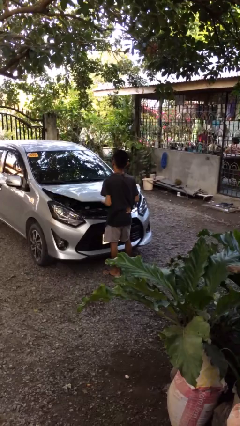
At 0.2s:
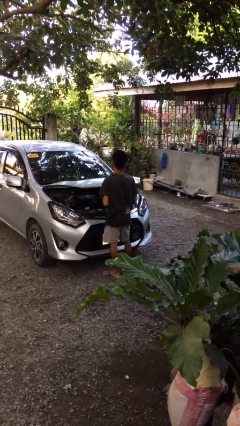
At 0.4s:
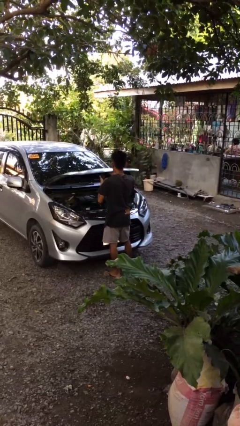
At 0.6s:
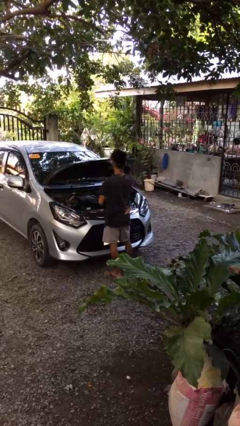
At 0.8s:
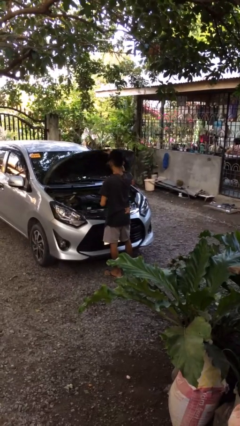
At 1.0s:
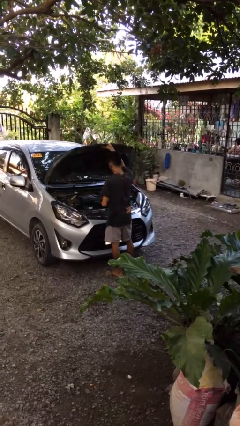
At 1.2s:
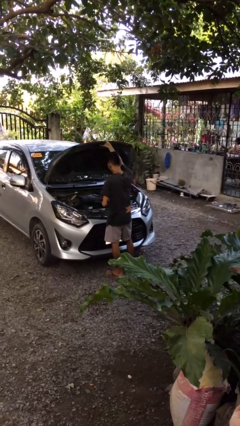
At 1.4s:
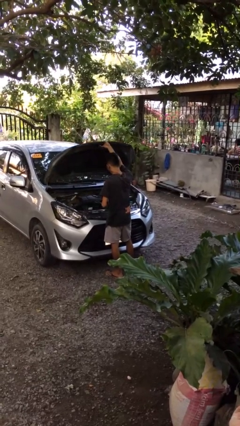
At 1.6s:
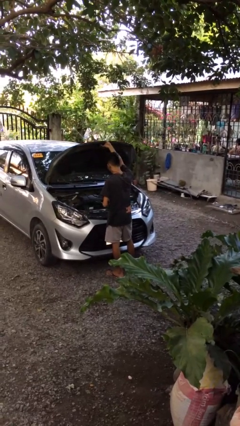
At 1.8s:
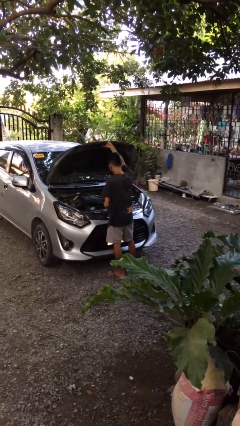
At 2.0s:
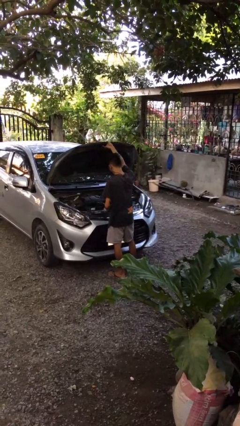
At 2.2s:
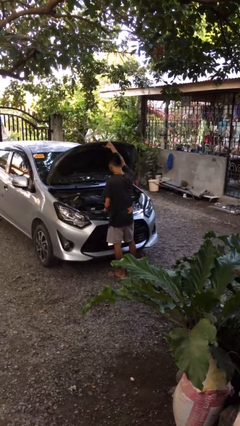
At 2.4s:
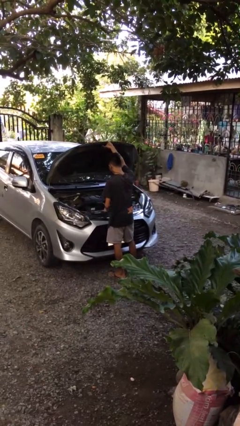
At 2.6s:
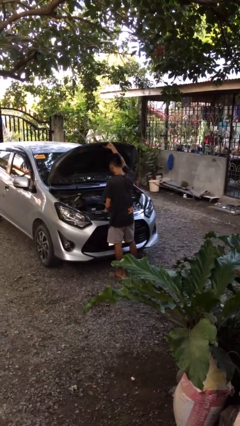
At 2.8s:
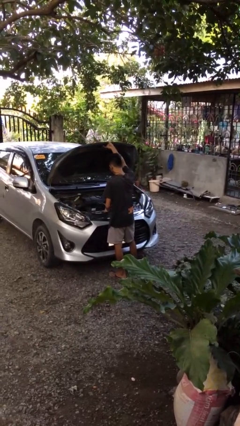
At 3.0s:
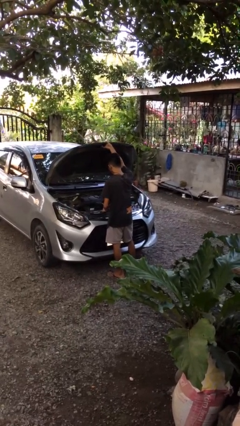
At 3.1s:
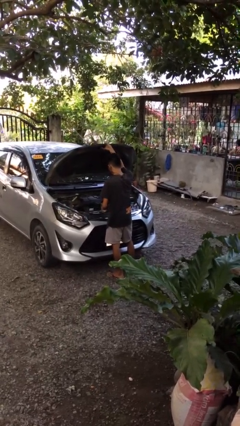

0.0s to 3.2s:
person opens car hood

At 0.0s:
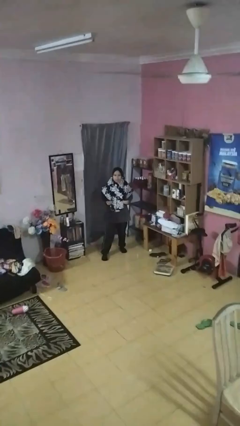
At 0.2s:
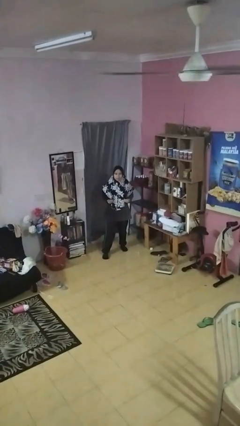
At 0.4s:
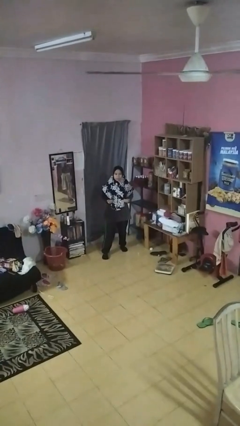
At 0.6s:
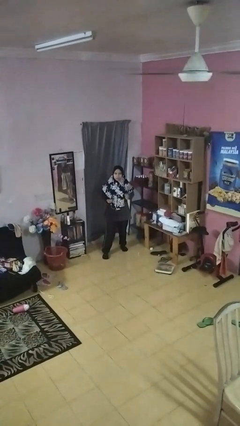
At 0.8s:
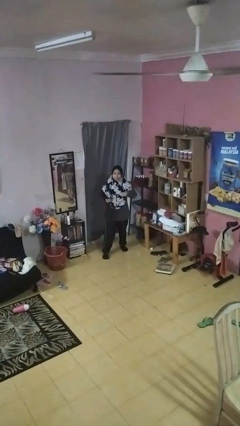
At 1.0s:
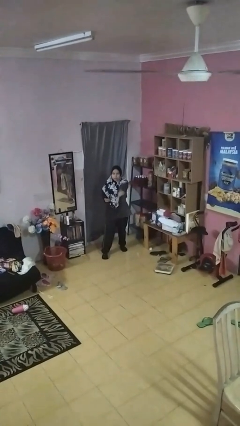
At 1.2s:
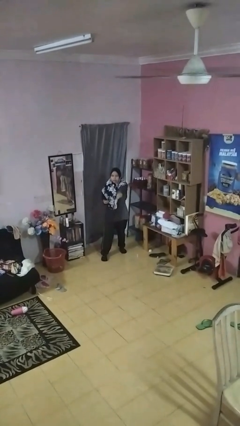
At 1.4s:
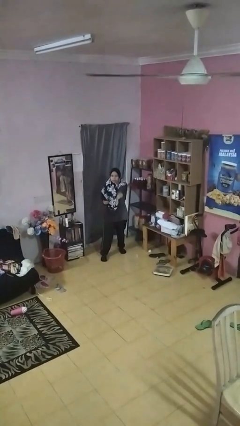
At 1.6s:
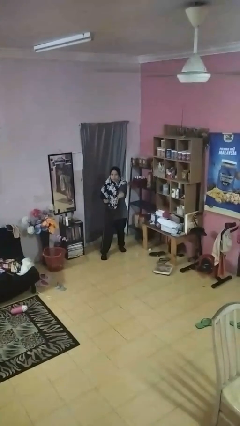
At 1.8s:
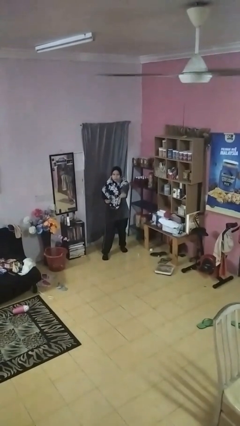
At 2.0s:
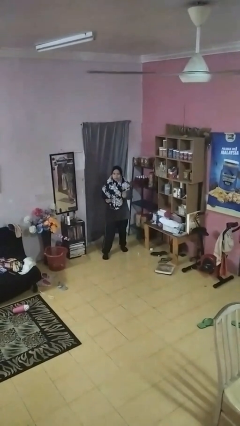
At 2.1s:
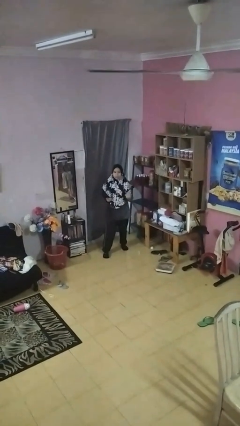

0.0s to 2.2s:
person punches

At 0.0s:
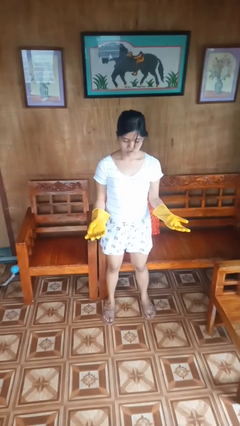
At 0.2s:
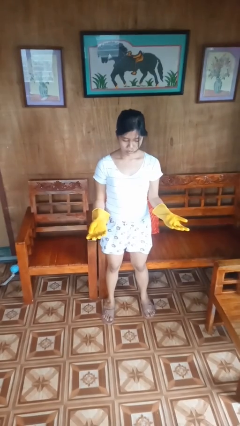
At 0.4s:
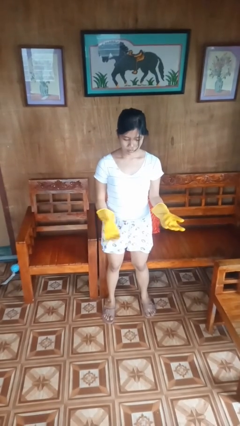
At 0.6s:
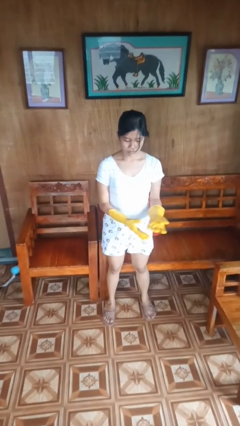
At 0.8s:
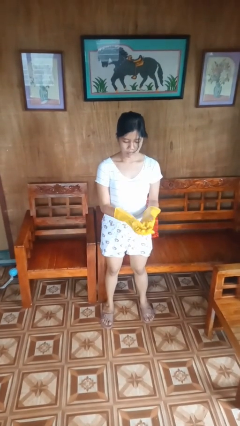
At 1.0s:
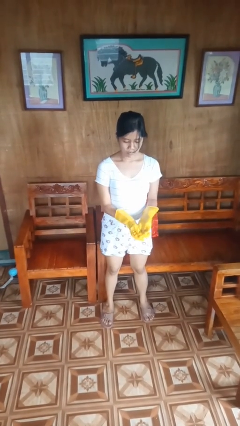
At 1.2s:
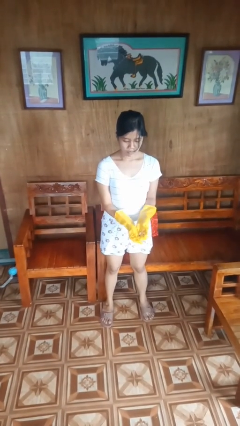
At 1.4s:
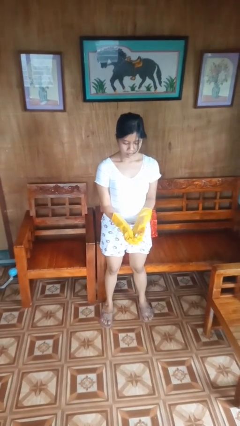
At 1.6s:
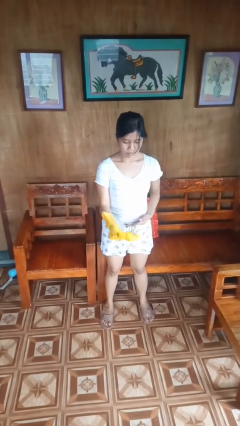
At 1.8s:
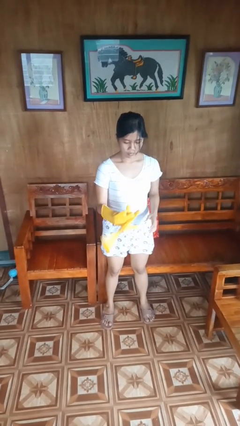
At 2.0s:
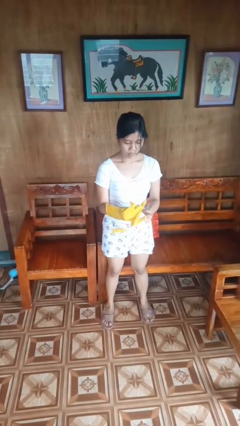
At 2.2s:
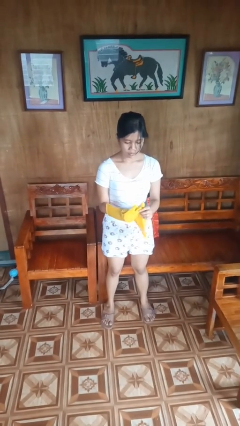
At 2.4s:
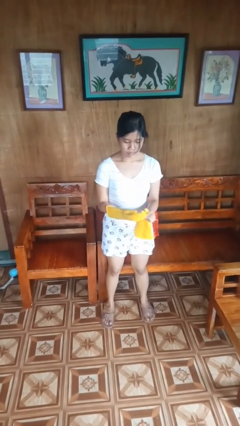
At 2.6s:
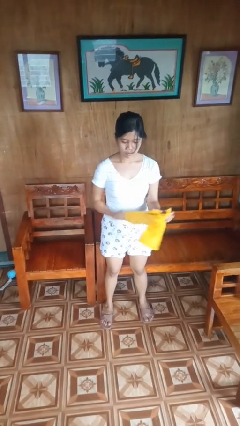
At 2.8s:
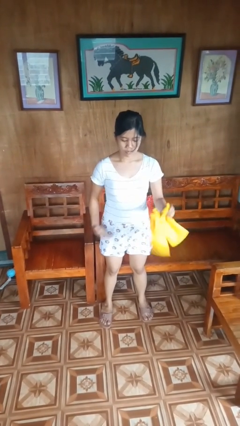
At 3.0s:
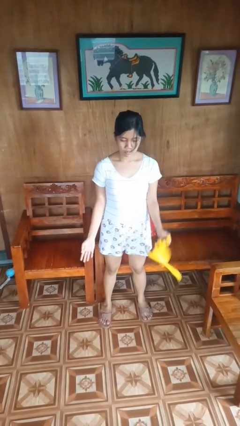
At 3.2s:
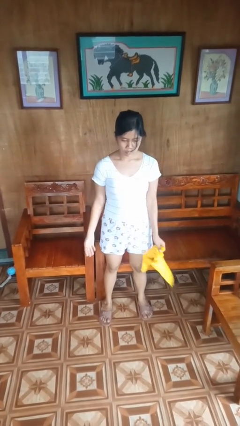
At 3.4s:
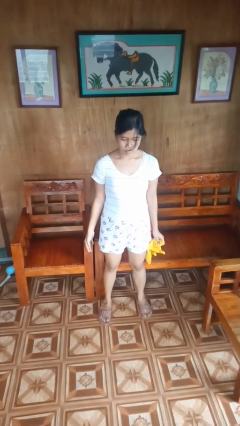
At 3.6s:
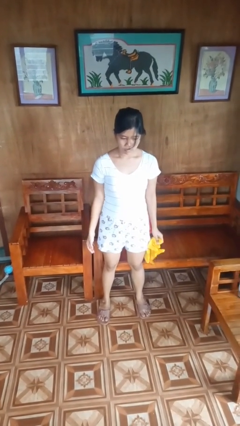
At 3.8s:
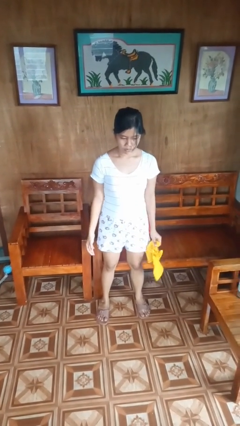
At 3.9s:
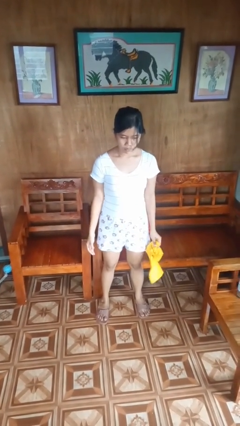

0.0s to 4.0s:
person takes off gloves

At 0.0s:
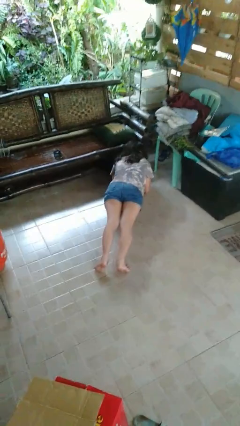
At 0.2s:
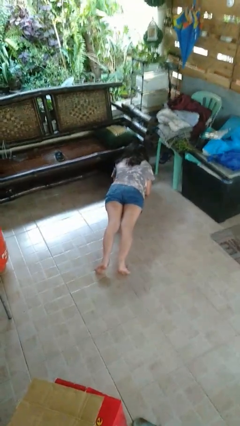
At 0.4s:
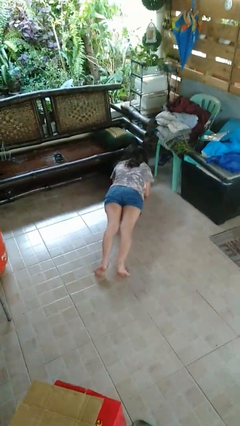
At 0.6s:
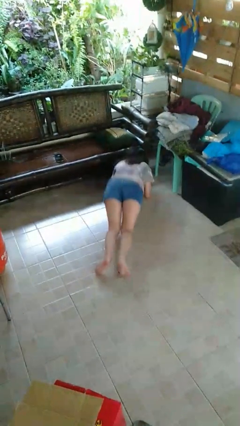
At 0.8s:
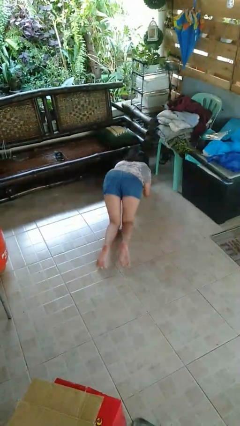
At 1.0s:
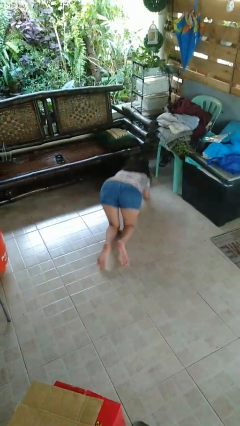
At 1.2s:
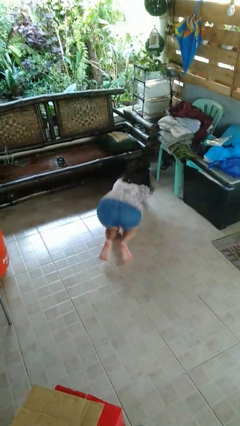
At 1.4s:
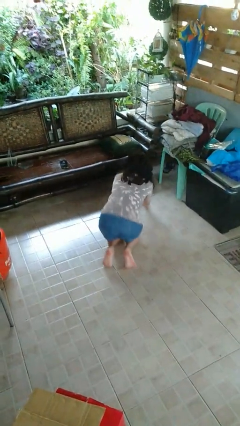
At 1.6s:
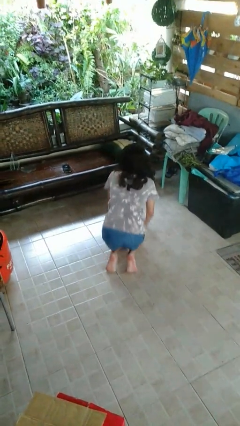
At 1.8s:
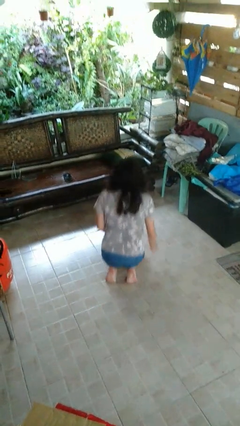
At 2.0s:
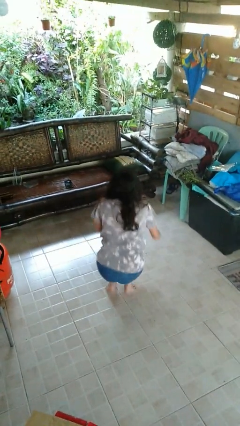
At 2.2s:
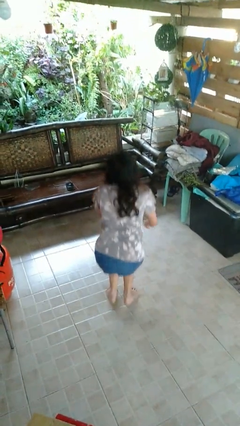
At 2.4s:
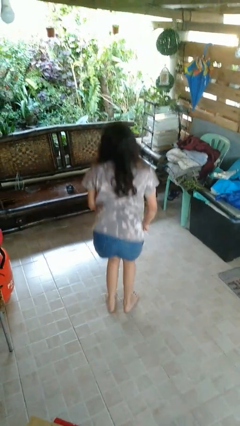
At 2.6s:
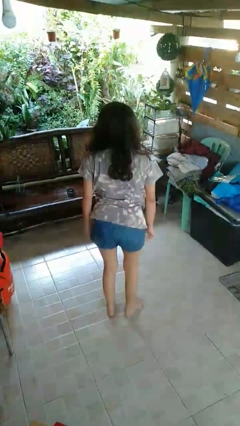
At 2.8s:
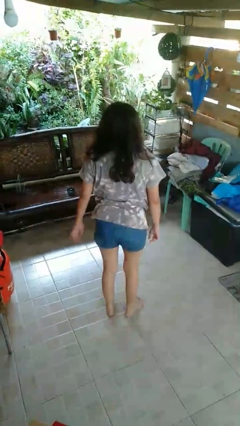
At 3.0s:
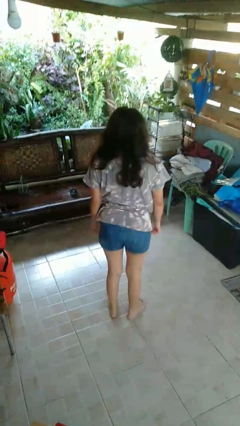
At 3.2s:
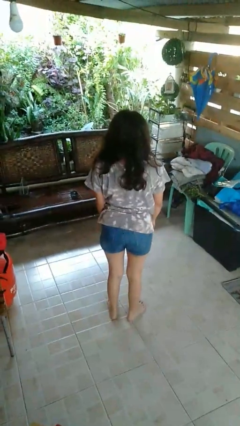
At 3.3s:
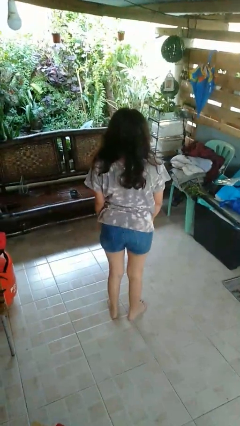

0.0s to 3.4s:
person stands up from floor

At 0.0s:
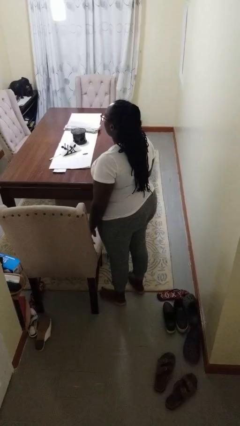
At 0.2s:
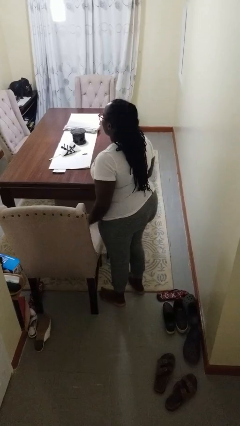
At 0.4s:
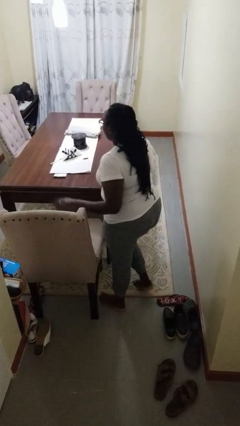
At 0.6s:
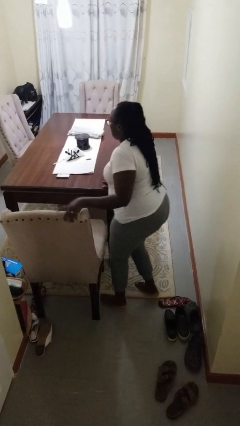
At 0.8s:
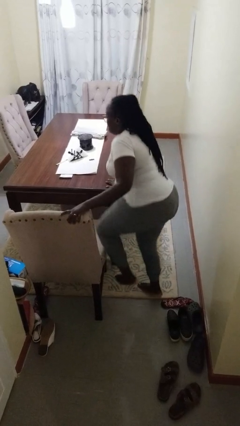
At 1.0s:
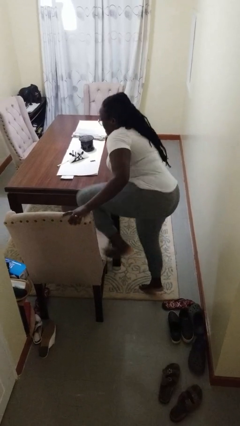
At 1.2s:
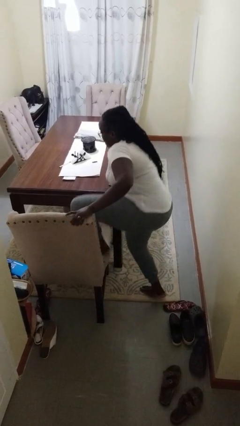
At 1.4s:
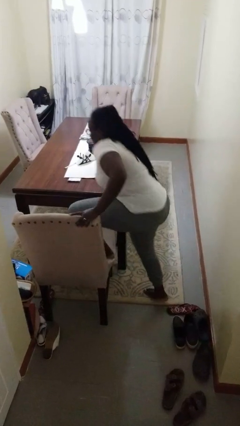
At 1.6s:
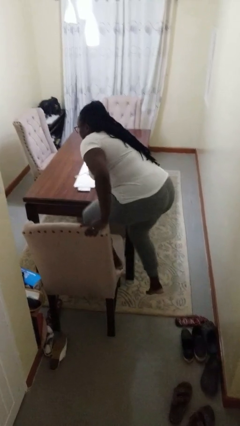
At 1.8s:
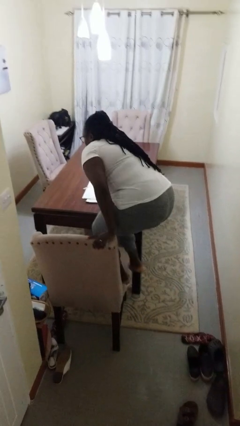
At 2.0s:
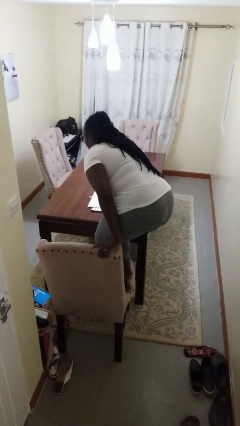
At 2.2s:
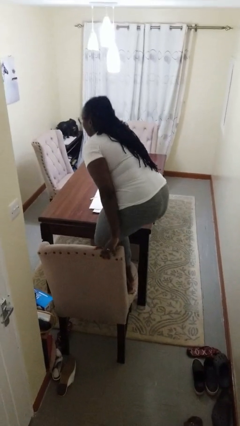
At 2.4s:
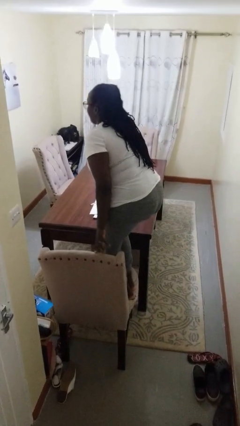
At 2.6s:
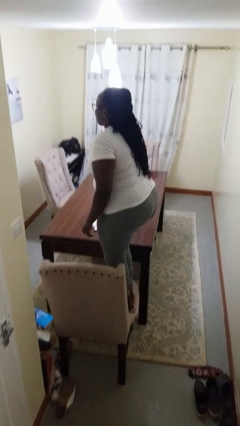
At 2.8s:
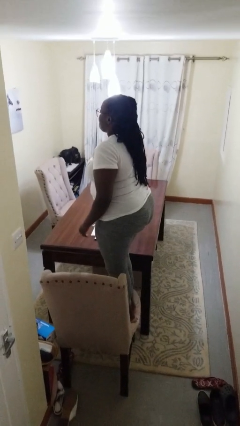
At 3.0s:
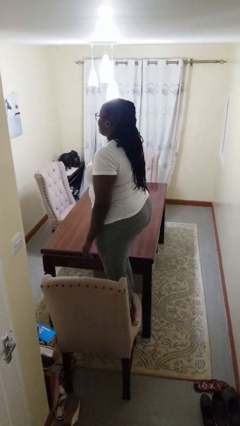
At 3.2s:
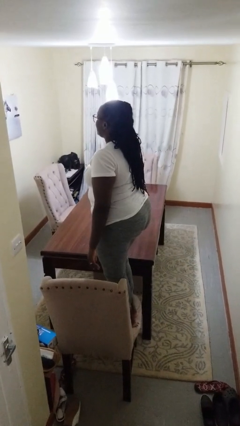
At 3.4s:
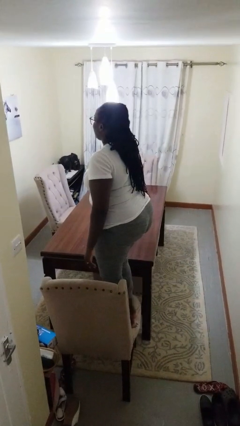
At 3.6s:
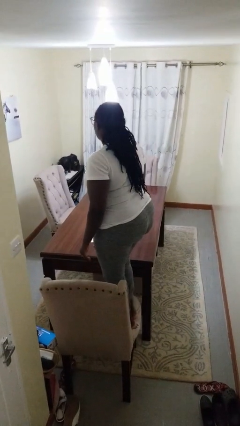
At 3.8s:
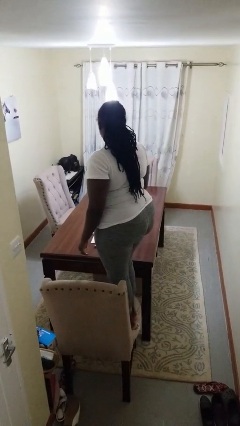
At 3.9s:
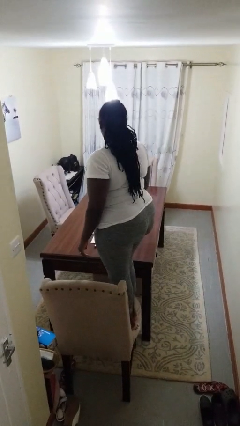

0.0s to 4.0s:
person climbs on chair

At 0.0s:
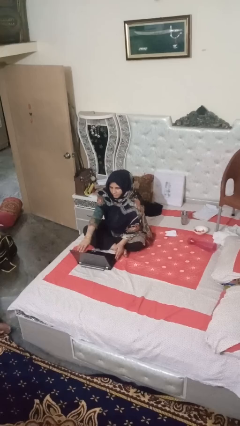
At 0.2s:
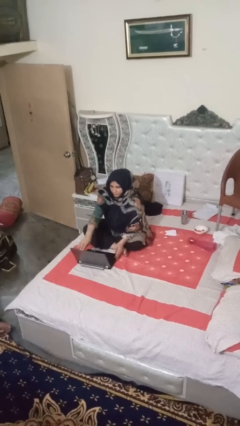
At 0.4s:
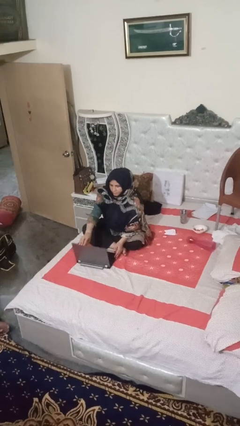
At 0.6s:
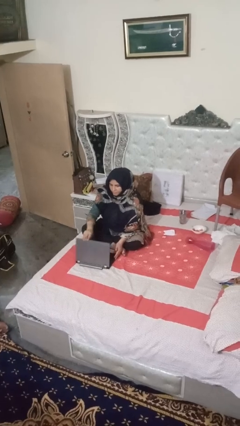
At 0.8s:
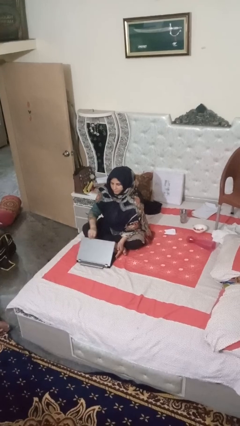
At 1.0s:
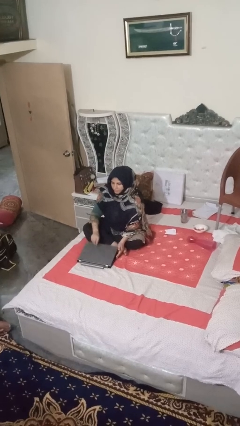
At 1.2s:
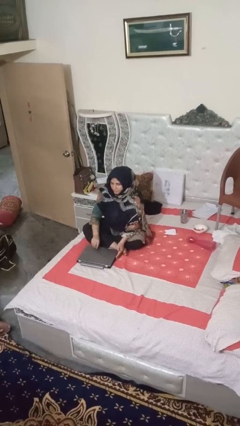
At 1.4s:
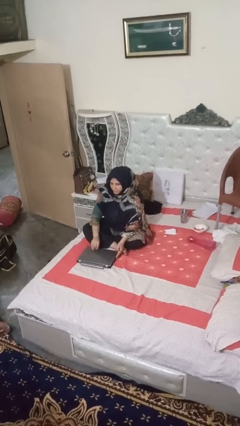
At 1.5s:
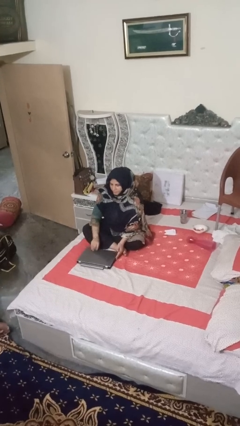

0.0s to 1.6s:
person closes laptop
